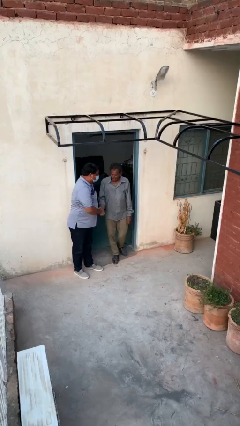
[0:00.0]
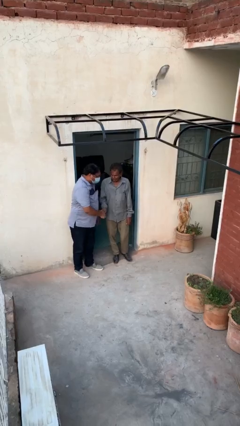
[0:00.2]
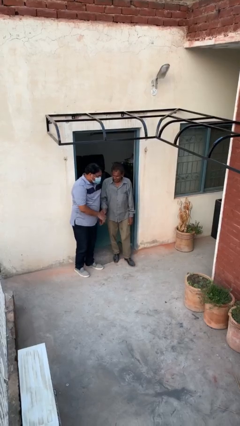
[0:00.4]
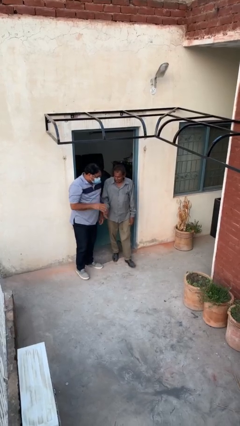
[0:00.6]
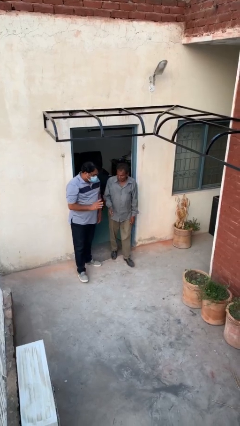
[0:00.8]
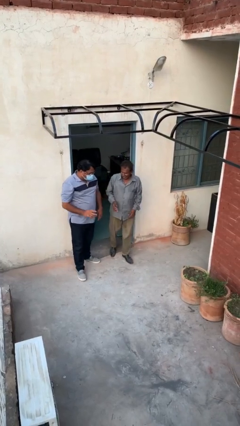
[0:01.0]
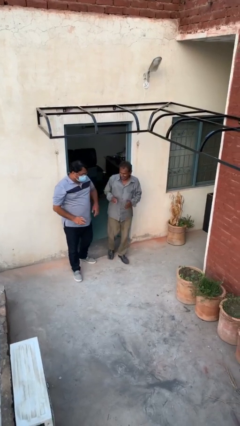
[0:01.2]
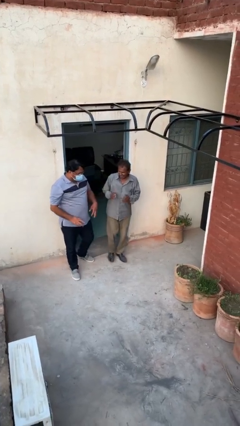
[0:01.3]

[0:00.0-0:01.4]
person shakes hand

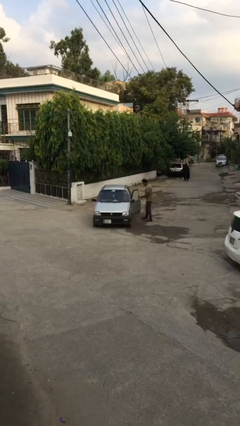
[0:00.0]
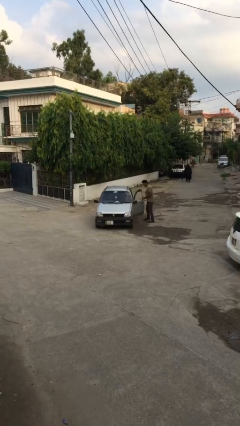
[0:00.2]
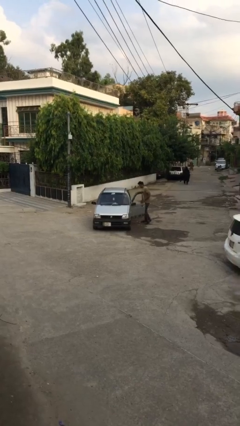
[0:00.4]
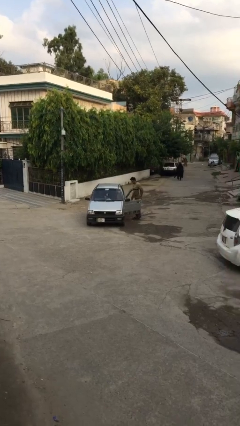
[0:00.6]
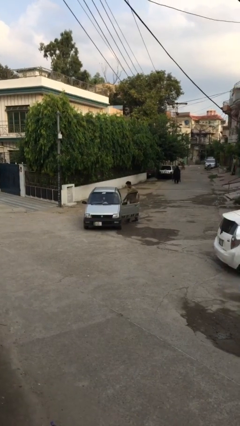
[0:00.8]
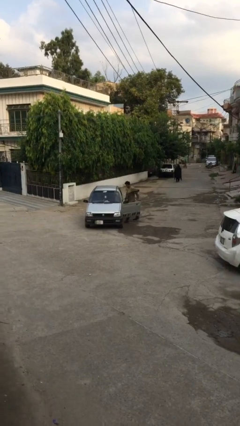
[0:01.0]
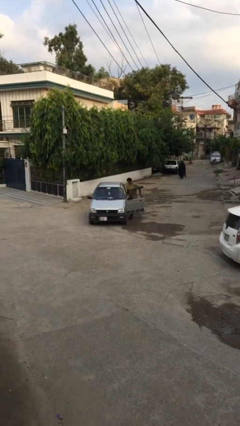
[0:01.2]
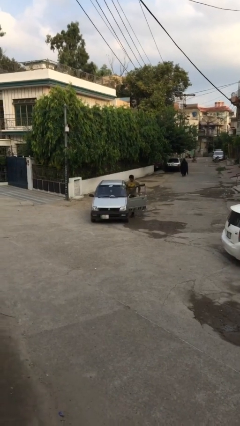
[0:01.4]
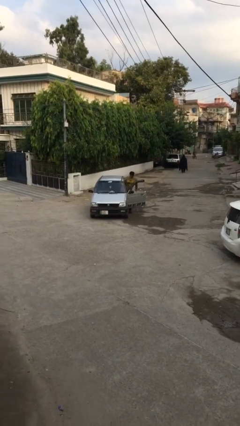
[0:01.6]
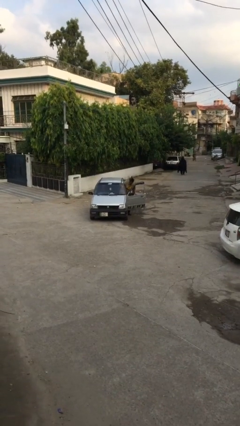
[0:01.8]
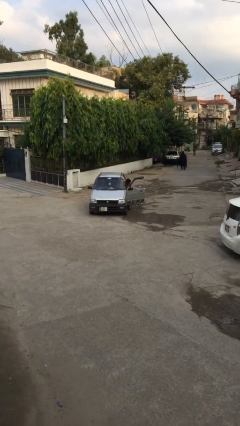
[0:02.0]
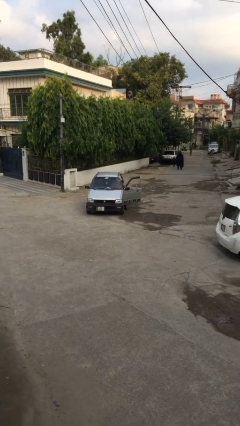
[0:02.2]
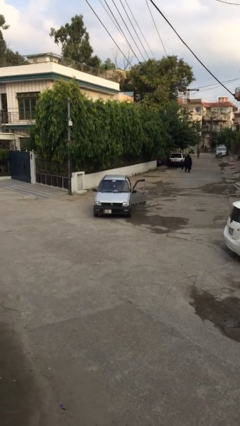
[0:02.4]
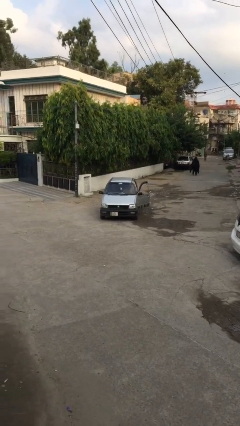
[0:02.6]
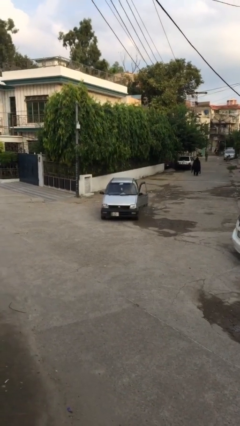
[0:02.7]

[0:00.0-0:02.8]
car picks up person

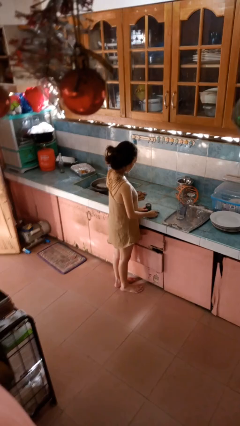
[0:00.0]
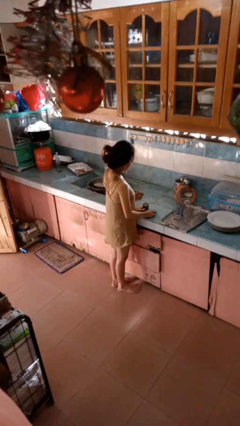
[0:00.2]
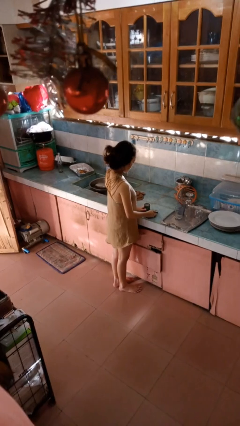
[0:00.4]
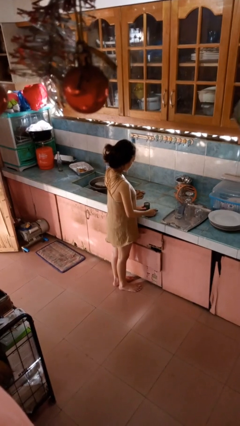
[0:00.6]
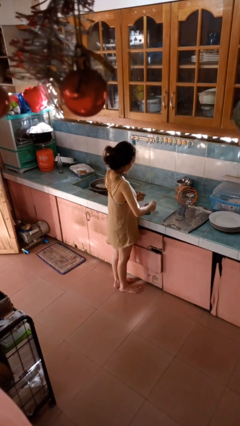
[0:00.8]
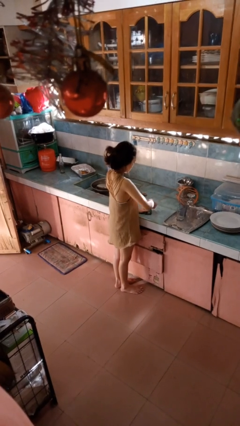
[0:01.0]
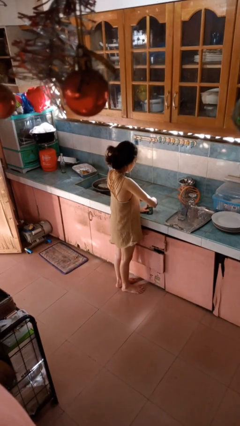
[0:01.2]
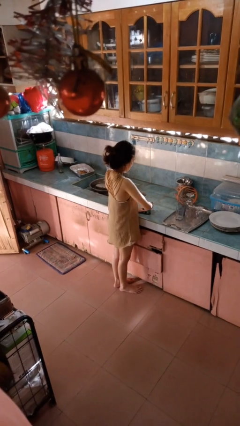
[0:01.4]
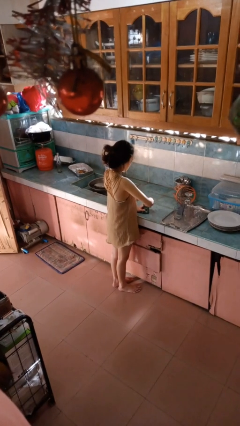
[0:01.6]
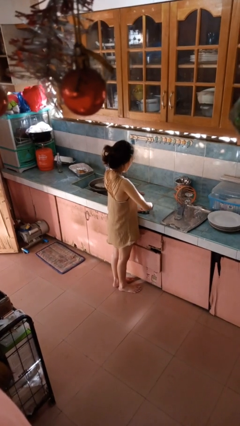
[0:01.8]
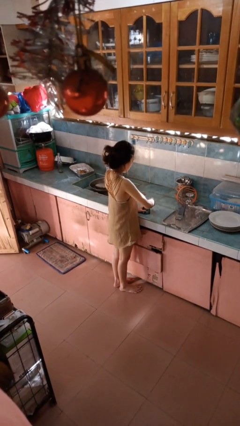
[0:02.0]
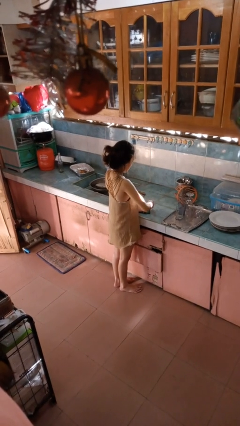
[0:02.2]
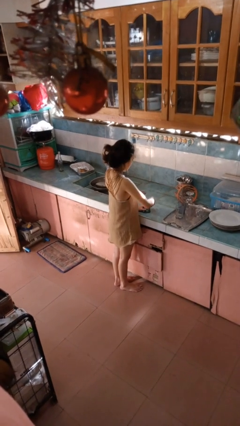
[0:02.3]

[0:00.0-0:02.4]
person opens can with can opener

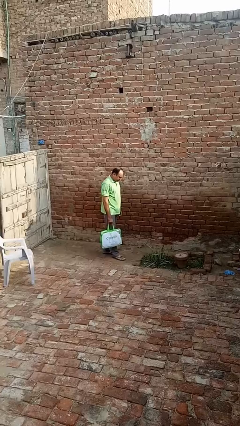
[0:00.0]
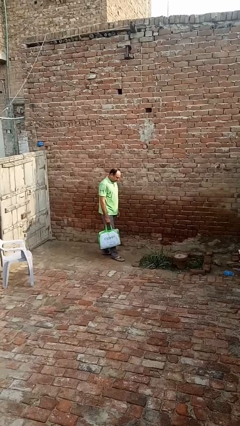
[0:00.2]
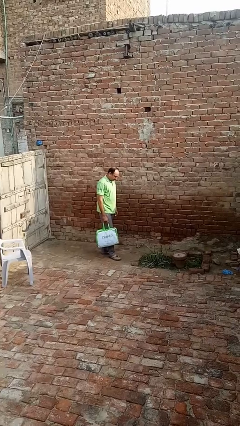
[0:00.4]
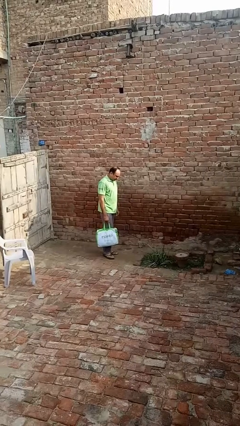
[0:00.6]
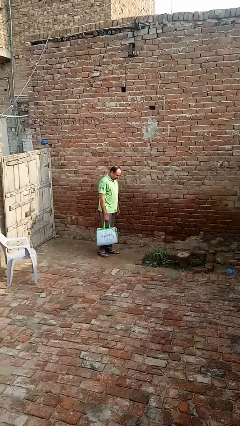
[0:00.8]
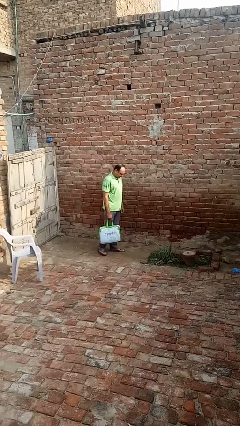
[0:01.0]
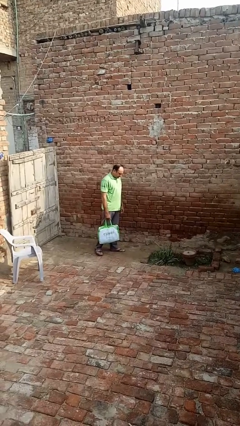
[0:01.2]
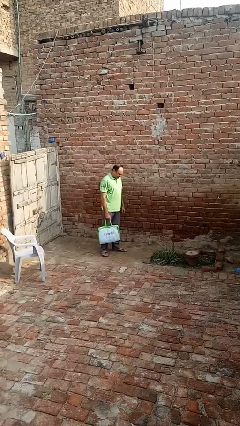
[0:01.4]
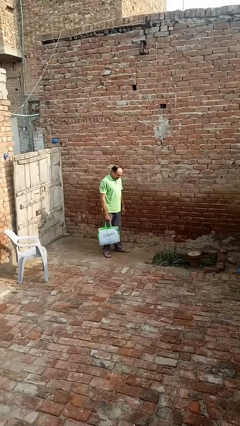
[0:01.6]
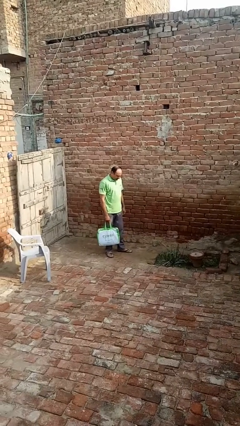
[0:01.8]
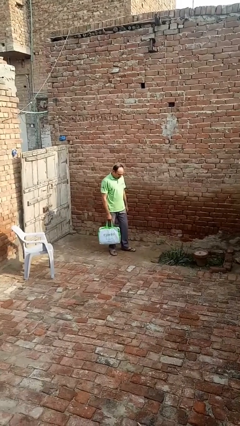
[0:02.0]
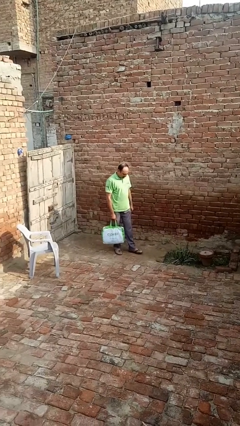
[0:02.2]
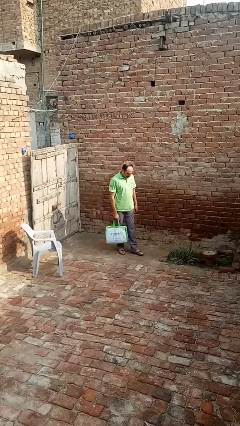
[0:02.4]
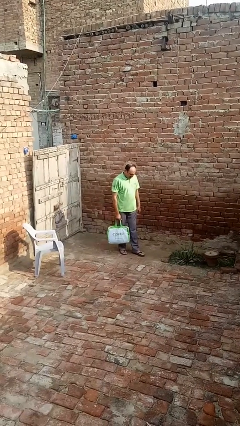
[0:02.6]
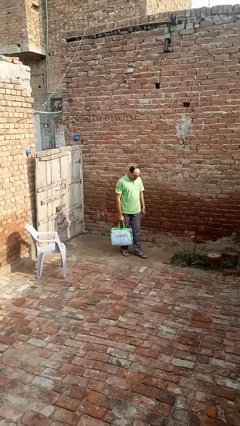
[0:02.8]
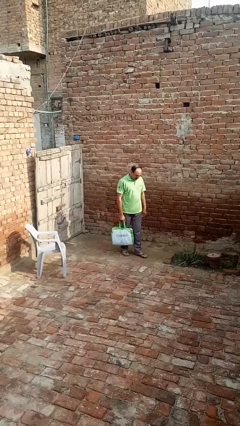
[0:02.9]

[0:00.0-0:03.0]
person carries groceries

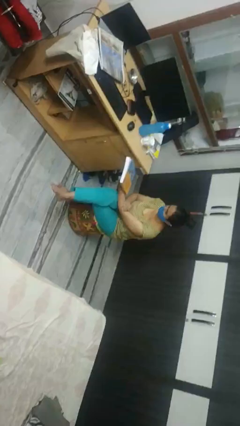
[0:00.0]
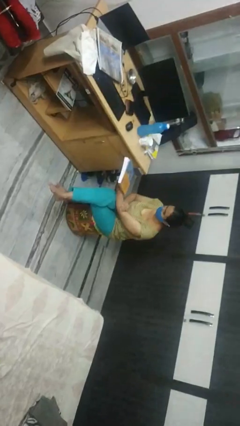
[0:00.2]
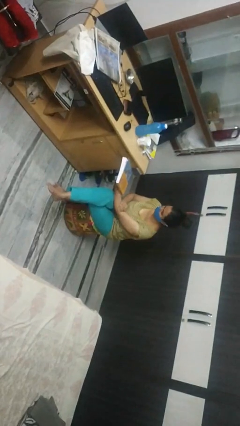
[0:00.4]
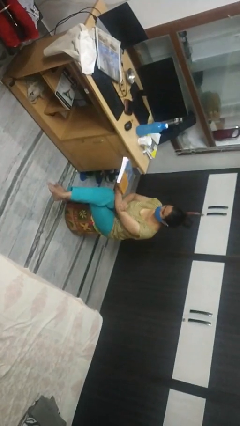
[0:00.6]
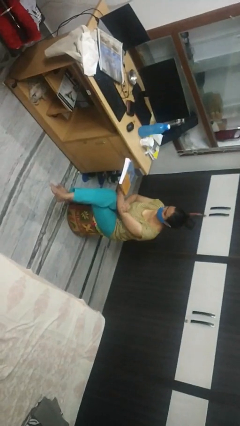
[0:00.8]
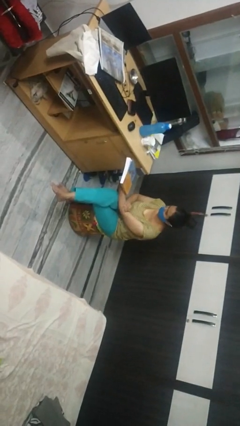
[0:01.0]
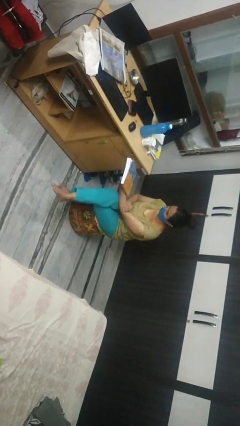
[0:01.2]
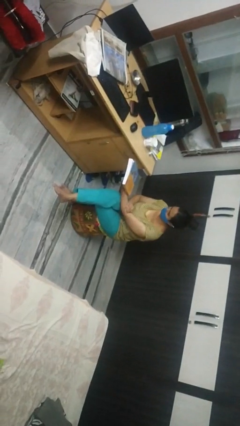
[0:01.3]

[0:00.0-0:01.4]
person reads book

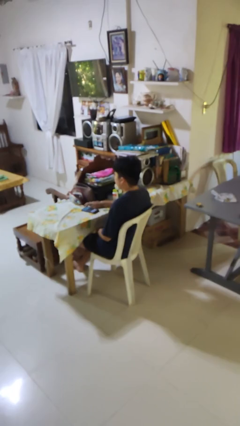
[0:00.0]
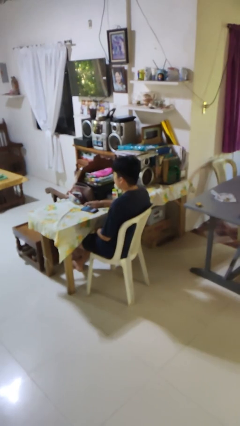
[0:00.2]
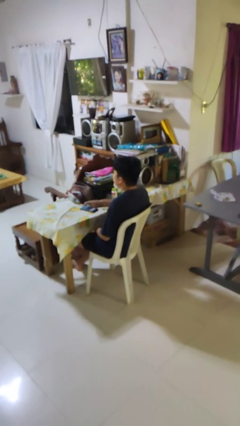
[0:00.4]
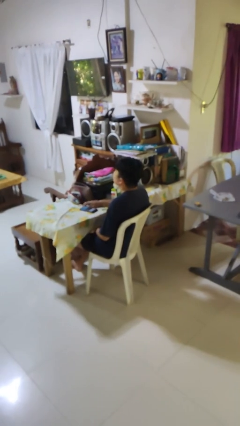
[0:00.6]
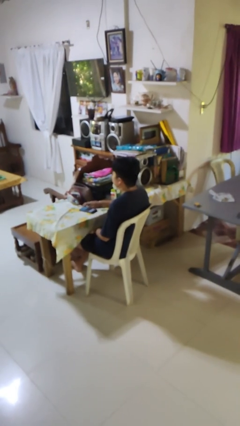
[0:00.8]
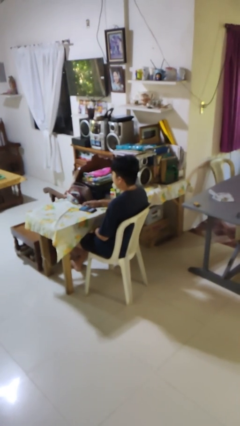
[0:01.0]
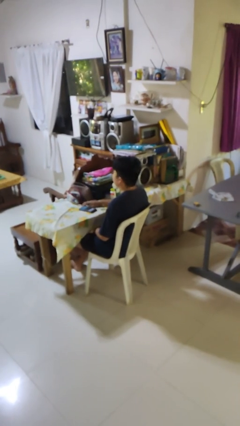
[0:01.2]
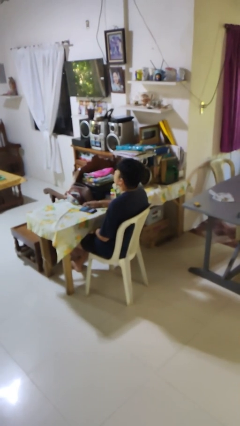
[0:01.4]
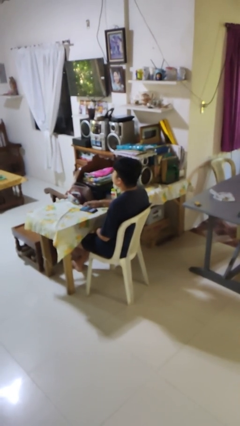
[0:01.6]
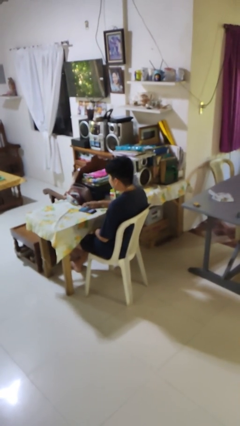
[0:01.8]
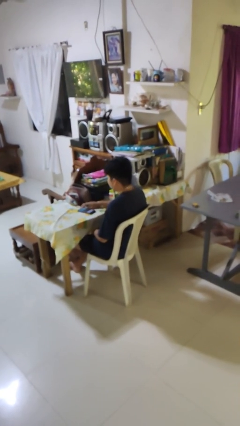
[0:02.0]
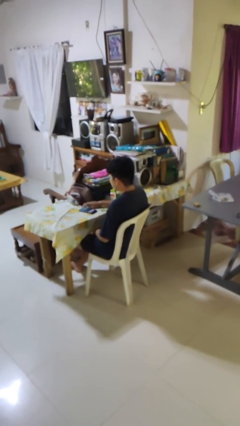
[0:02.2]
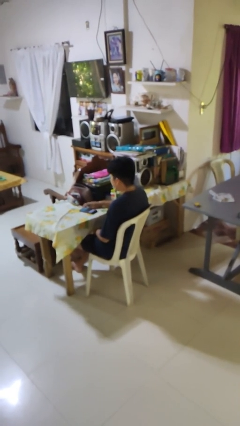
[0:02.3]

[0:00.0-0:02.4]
person nods head

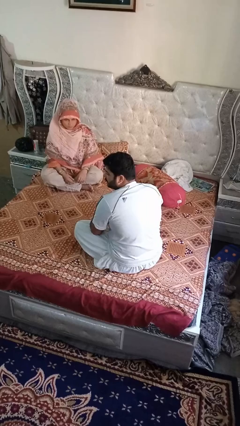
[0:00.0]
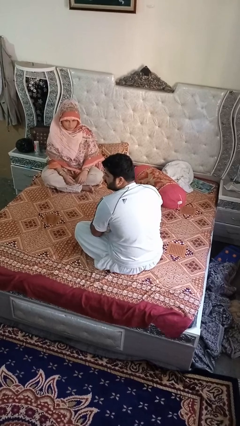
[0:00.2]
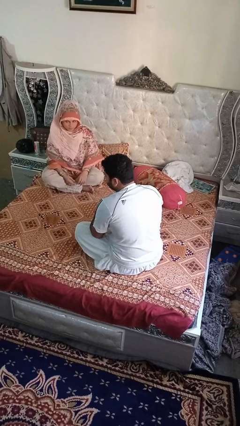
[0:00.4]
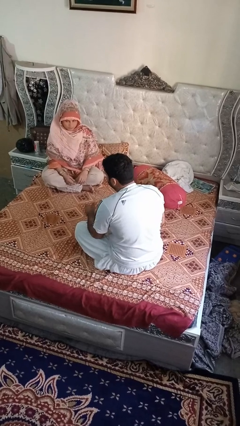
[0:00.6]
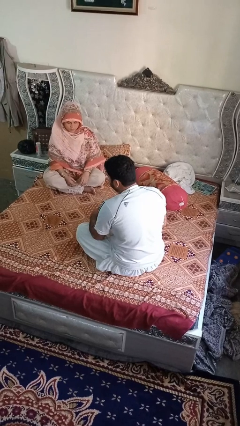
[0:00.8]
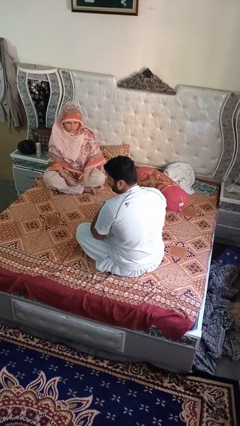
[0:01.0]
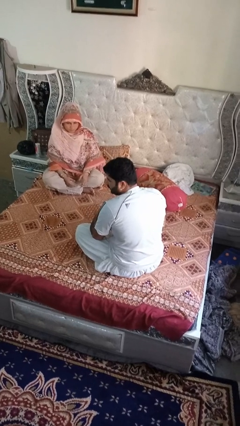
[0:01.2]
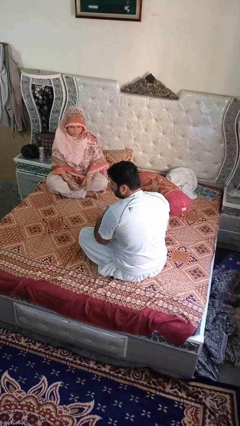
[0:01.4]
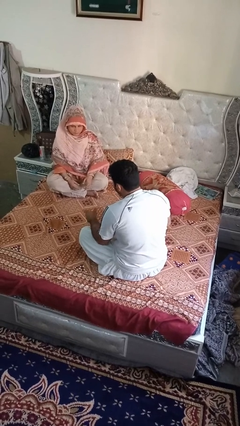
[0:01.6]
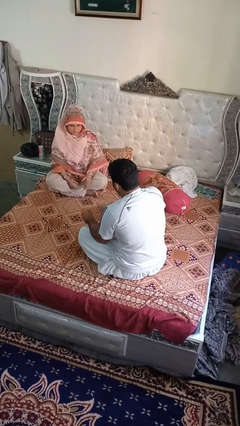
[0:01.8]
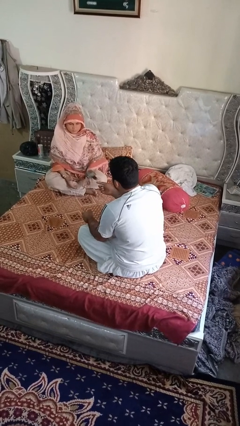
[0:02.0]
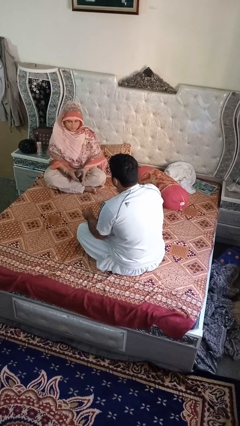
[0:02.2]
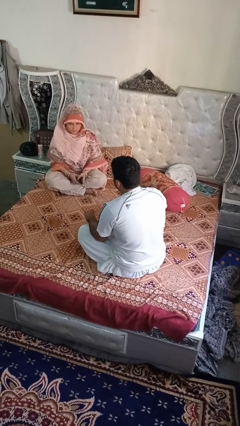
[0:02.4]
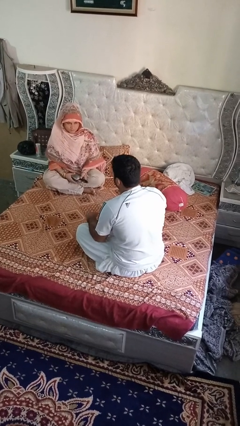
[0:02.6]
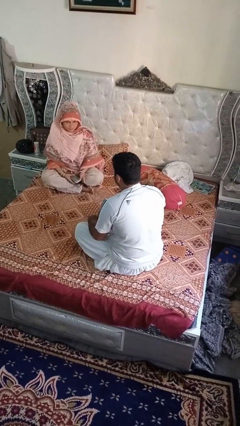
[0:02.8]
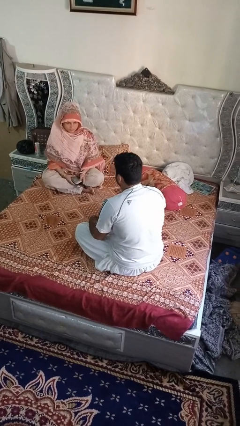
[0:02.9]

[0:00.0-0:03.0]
person throws object to person

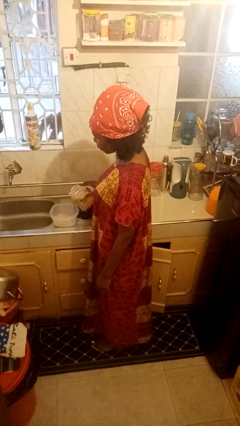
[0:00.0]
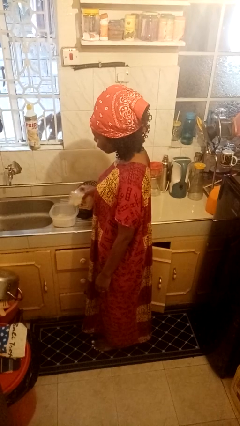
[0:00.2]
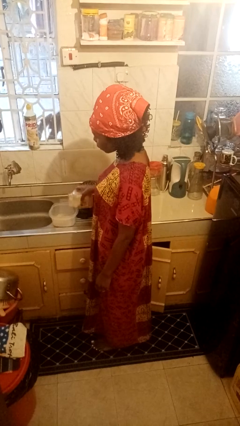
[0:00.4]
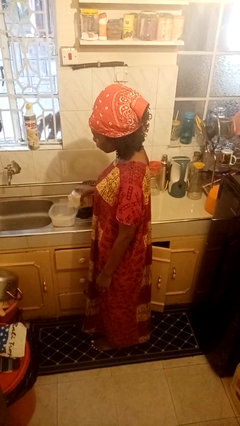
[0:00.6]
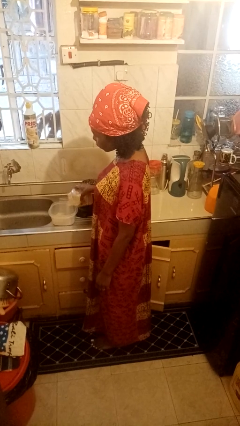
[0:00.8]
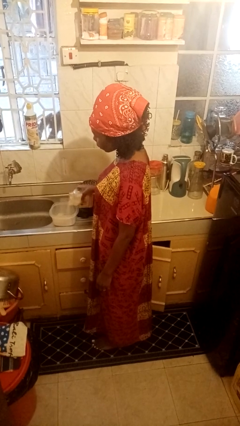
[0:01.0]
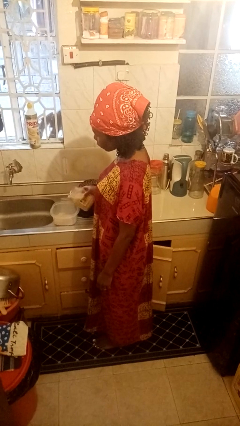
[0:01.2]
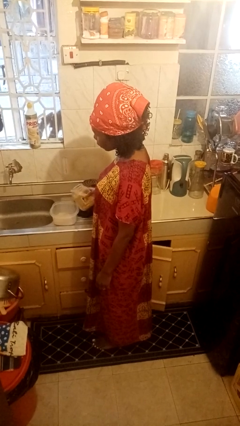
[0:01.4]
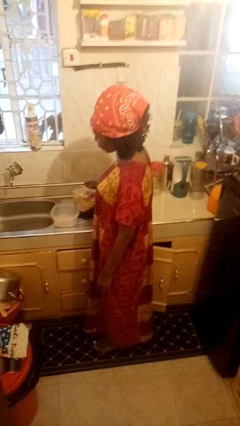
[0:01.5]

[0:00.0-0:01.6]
person pours into bowl
